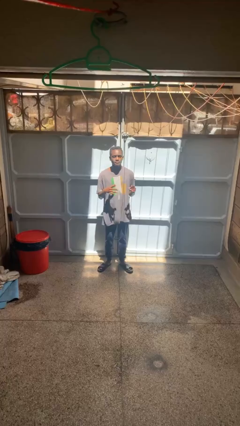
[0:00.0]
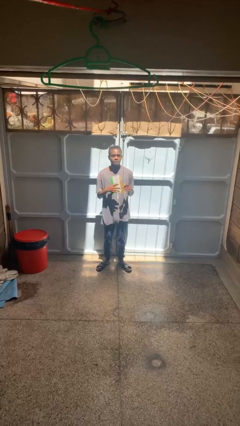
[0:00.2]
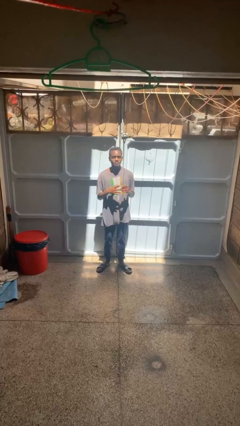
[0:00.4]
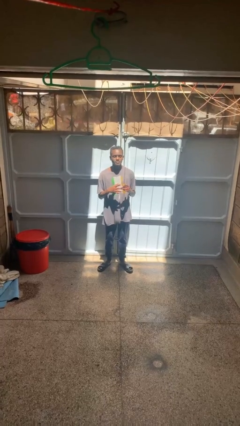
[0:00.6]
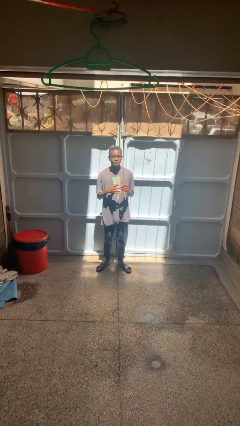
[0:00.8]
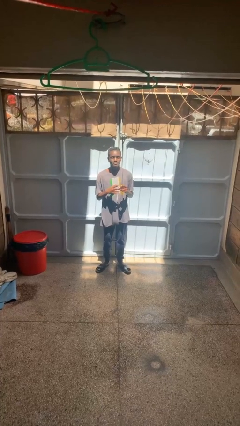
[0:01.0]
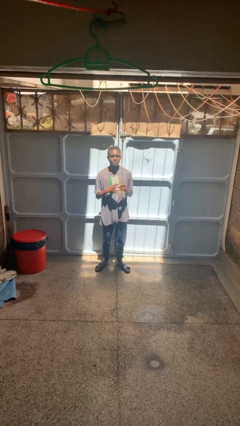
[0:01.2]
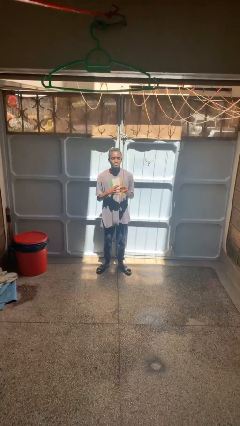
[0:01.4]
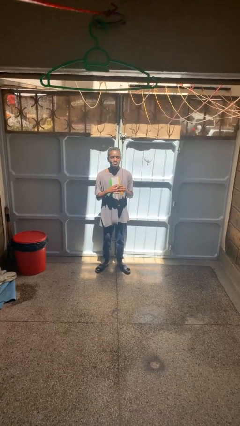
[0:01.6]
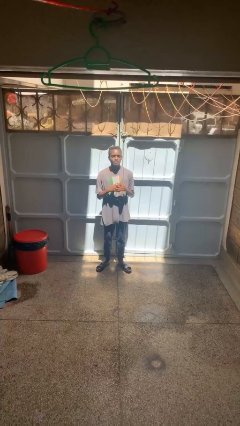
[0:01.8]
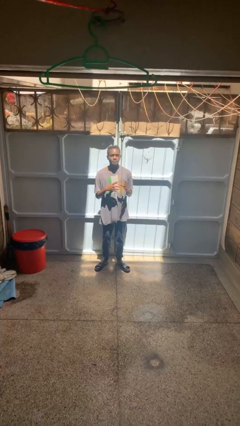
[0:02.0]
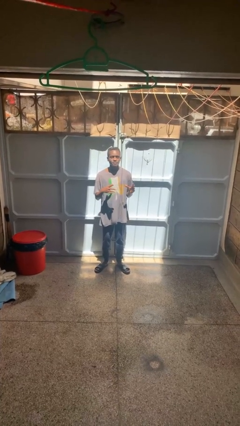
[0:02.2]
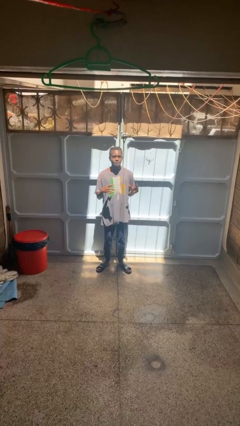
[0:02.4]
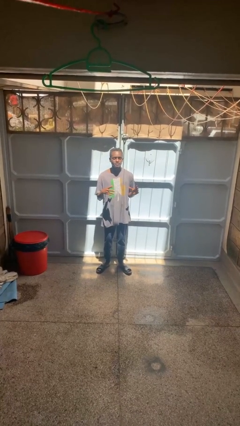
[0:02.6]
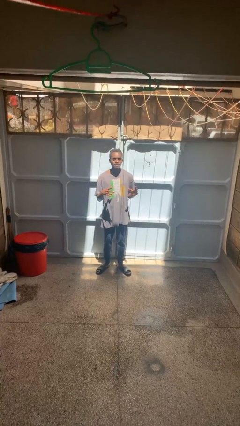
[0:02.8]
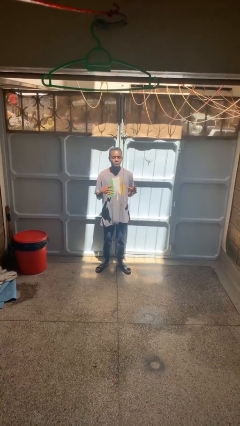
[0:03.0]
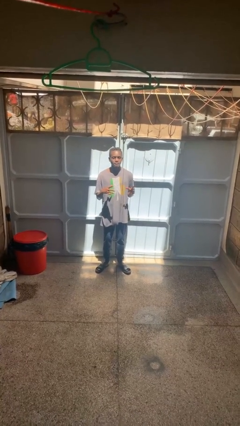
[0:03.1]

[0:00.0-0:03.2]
person puts on ring

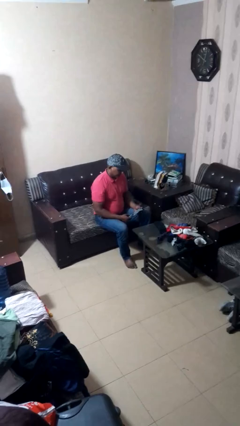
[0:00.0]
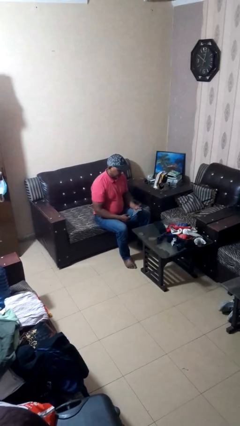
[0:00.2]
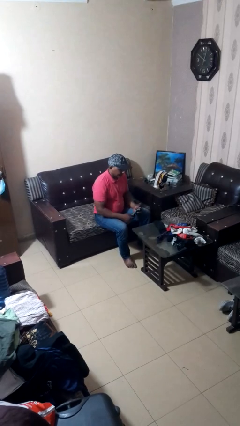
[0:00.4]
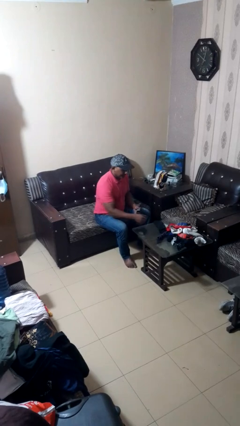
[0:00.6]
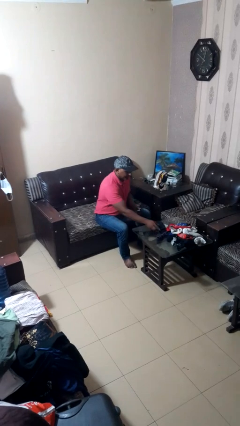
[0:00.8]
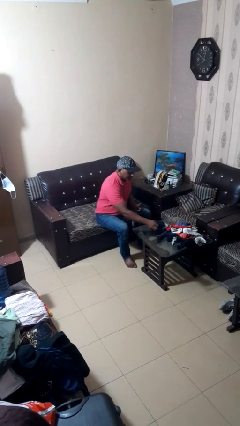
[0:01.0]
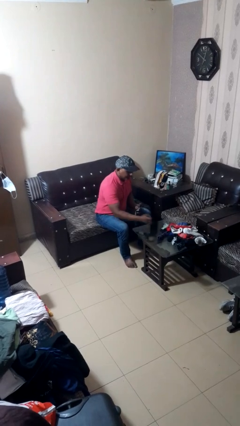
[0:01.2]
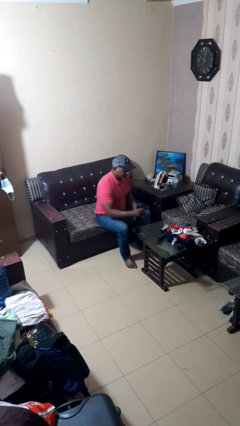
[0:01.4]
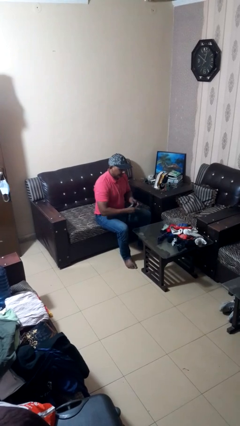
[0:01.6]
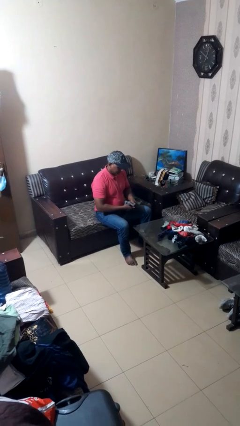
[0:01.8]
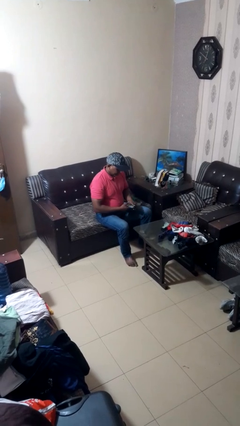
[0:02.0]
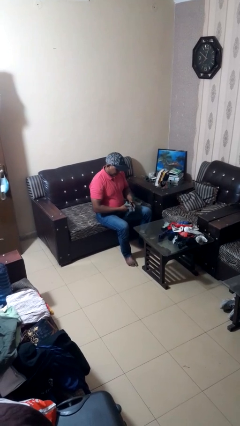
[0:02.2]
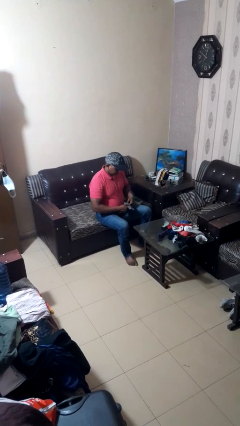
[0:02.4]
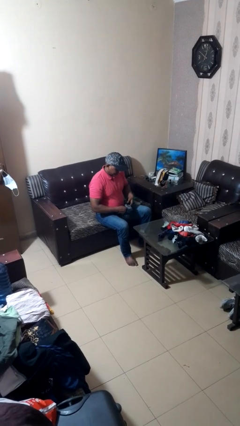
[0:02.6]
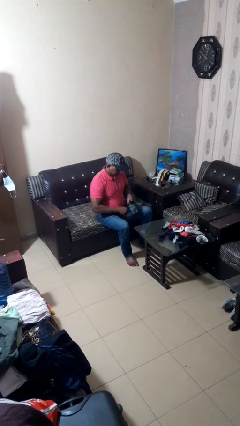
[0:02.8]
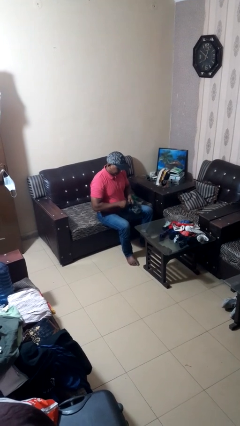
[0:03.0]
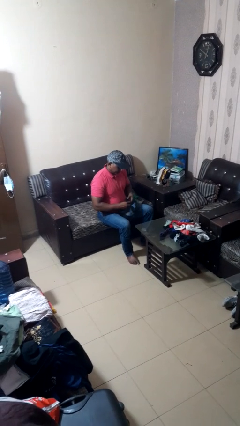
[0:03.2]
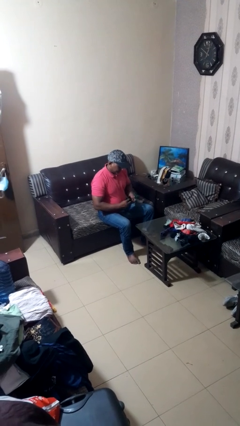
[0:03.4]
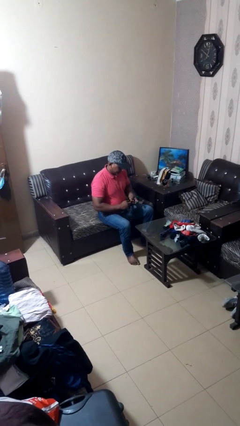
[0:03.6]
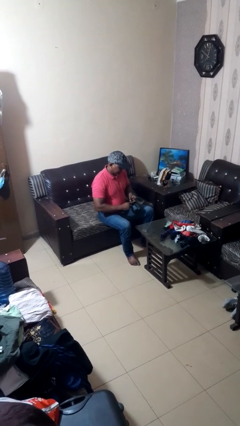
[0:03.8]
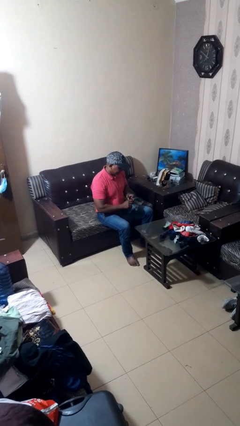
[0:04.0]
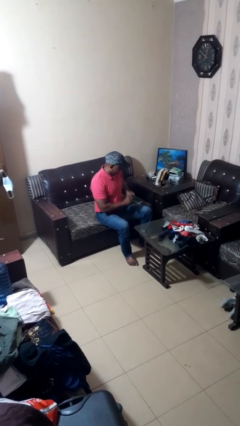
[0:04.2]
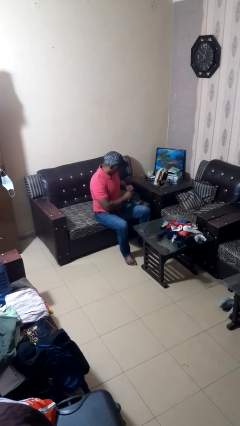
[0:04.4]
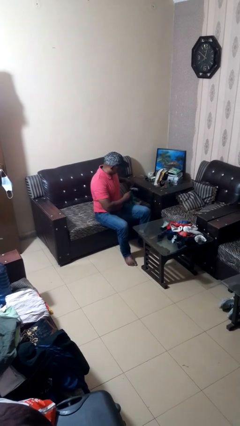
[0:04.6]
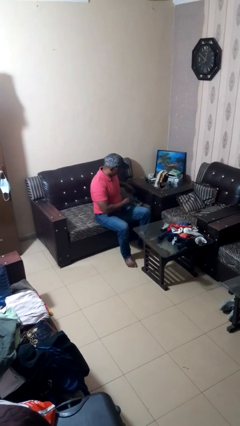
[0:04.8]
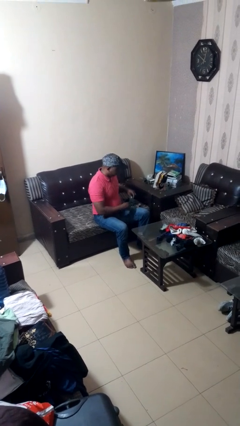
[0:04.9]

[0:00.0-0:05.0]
person folds socks

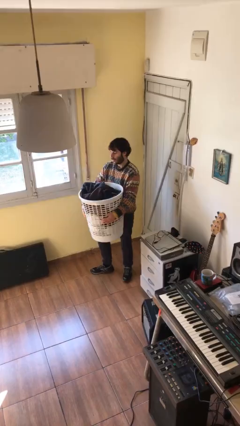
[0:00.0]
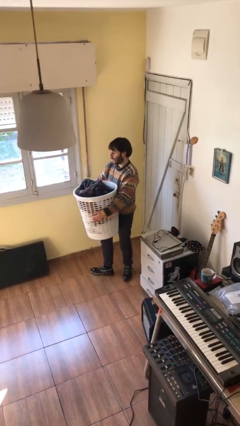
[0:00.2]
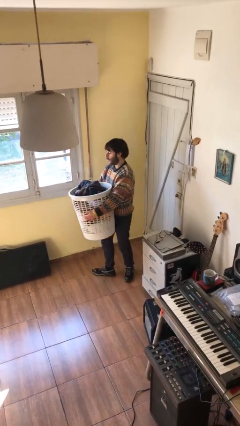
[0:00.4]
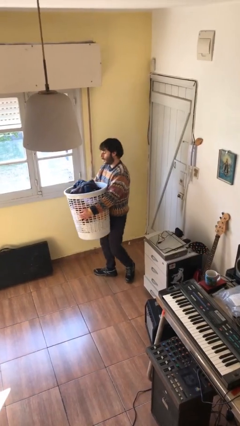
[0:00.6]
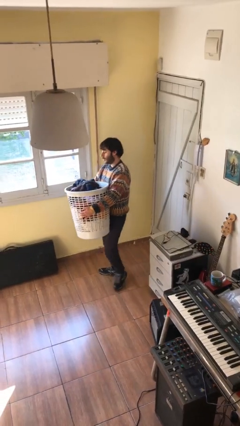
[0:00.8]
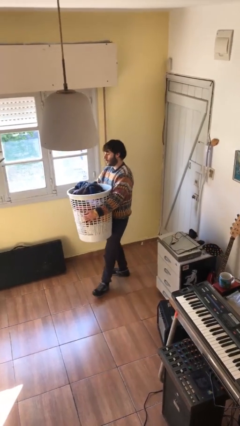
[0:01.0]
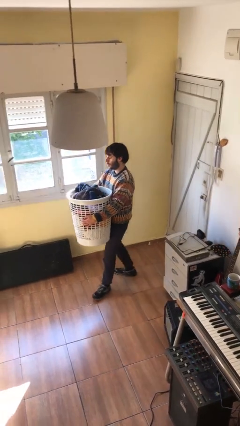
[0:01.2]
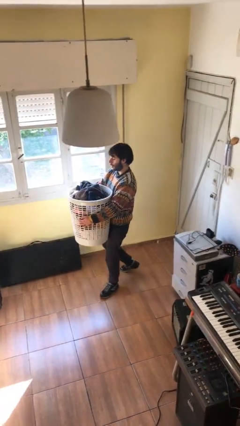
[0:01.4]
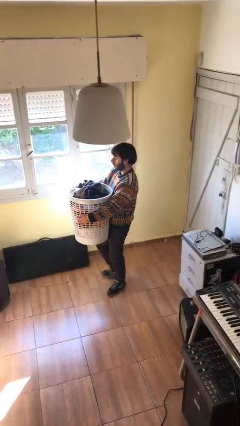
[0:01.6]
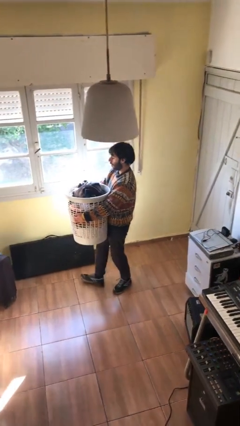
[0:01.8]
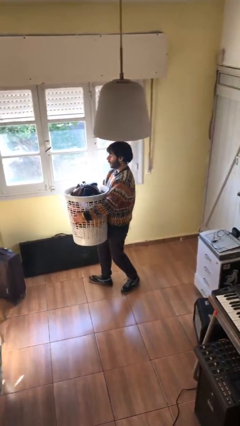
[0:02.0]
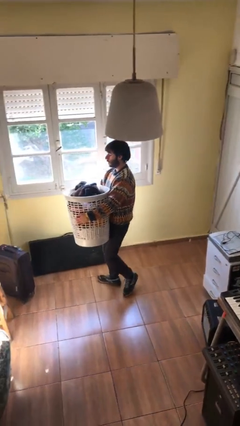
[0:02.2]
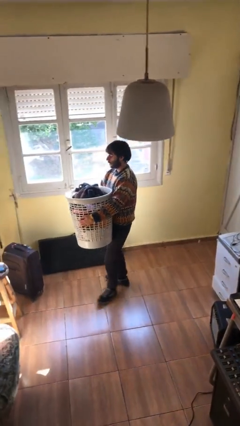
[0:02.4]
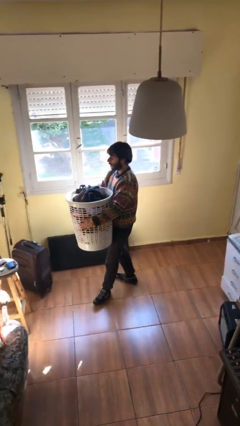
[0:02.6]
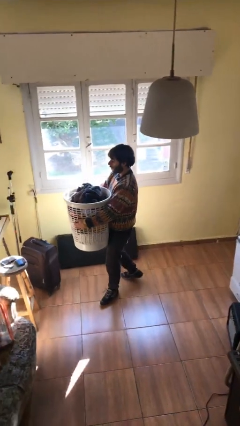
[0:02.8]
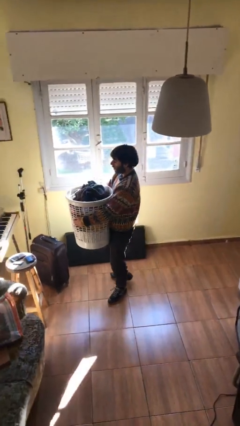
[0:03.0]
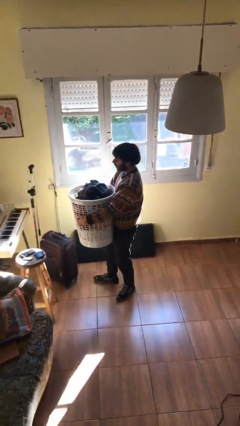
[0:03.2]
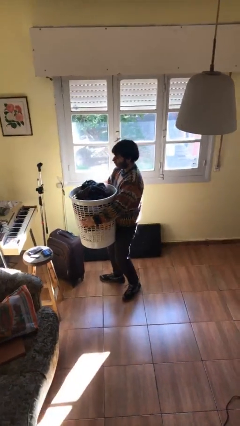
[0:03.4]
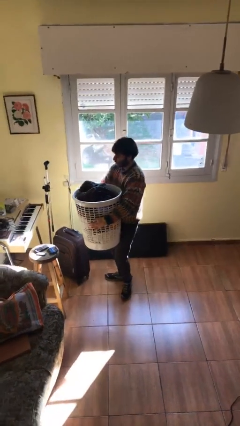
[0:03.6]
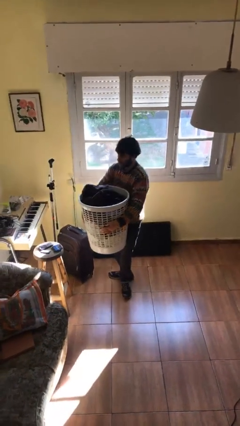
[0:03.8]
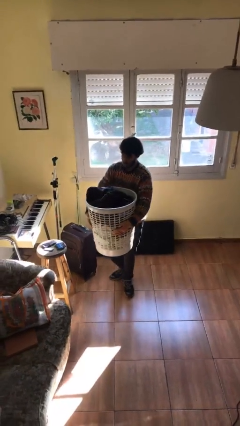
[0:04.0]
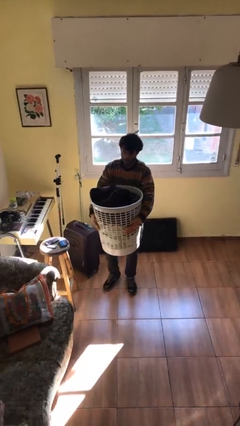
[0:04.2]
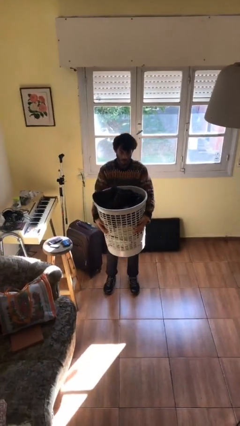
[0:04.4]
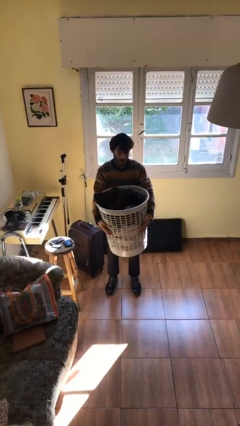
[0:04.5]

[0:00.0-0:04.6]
person carries laundry basket

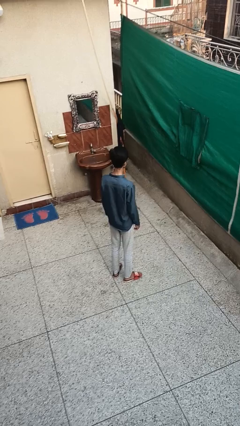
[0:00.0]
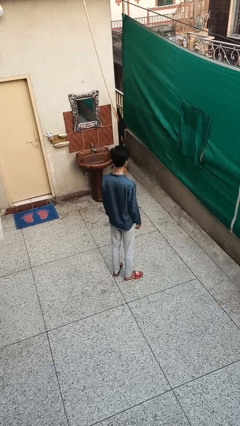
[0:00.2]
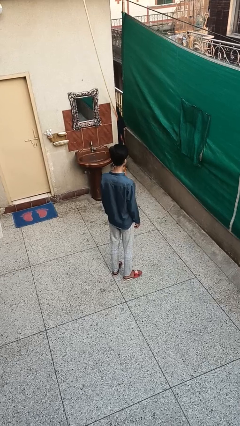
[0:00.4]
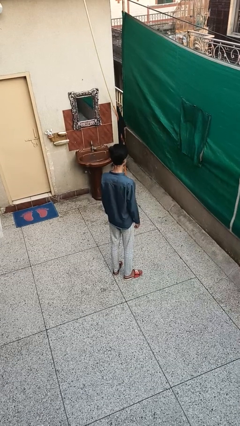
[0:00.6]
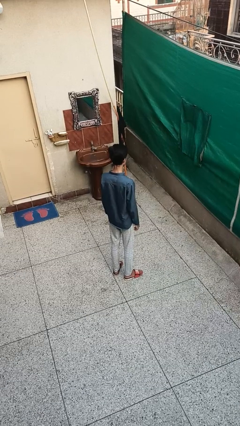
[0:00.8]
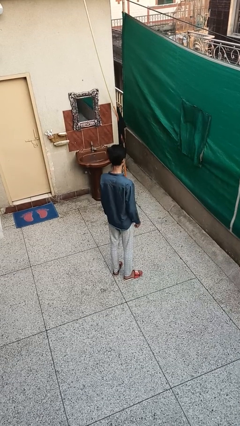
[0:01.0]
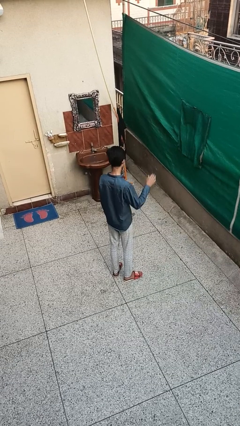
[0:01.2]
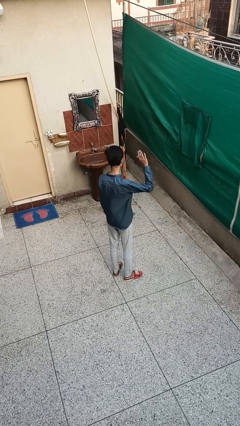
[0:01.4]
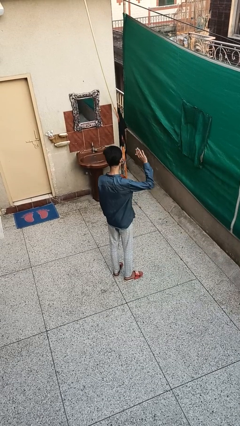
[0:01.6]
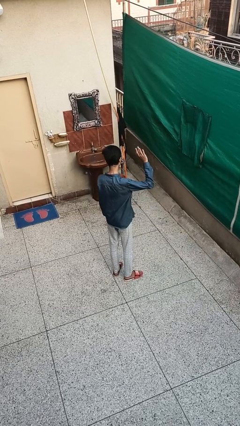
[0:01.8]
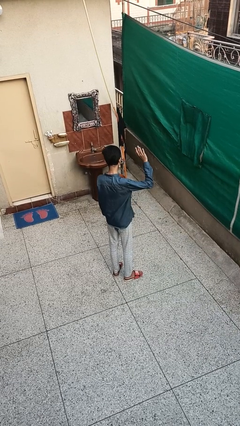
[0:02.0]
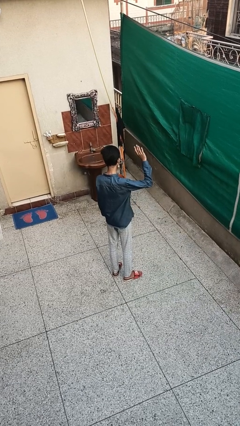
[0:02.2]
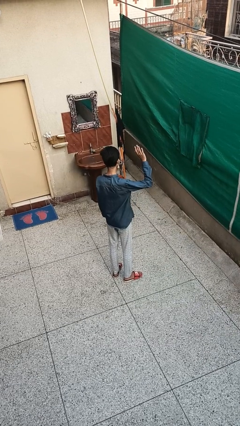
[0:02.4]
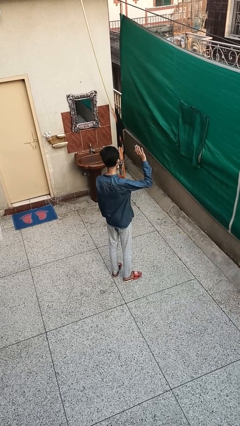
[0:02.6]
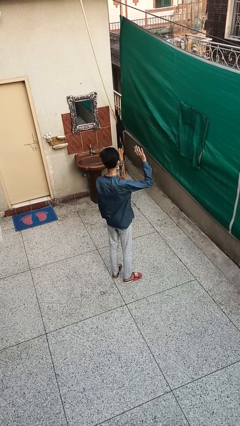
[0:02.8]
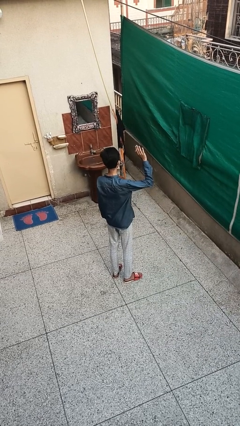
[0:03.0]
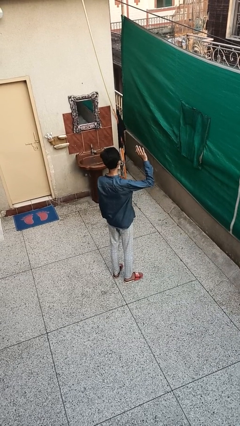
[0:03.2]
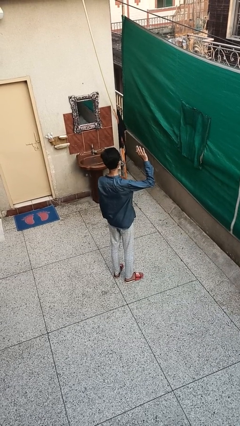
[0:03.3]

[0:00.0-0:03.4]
person gestures raise hand

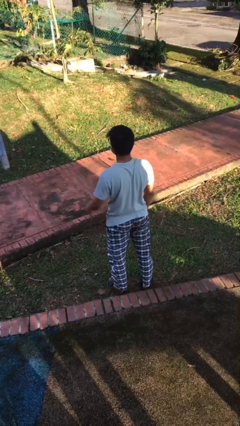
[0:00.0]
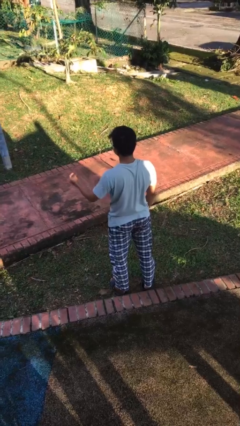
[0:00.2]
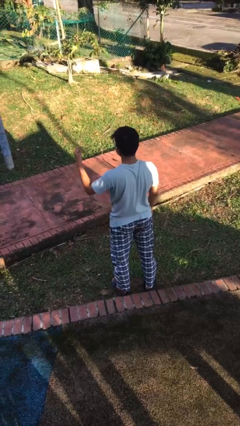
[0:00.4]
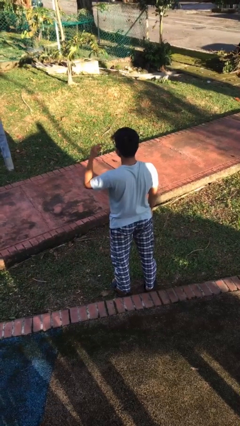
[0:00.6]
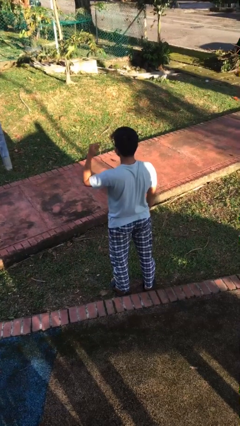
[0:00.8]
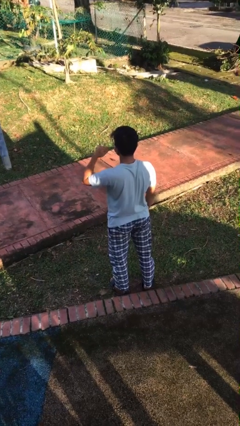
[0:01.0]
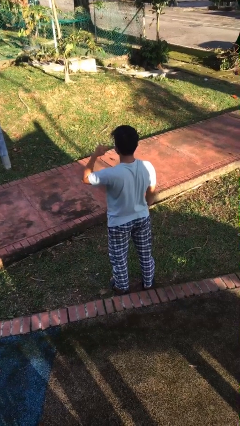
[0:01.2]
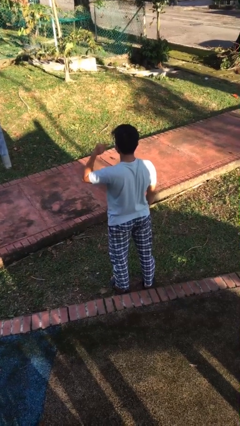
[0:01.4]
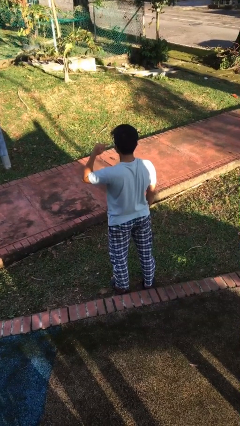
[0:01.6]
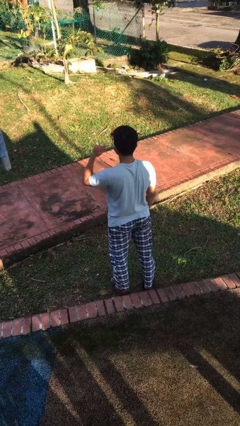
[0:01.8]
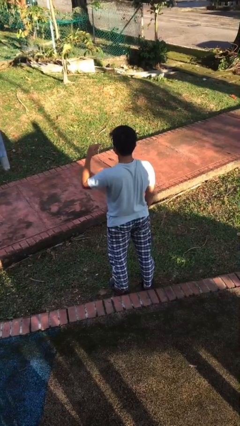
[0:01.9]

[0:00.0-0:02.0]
person gestures listen closely
